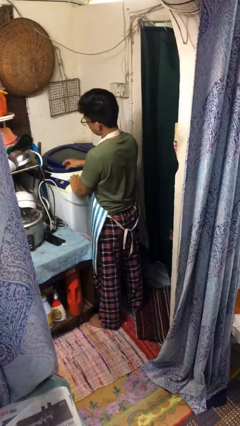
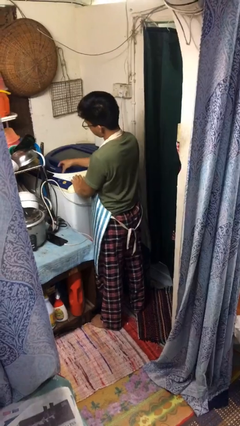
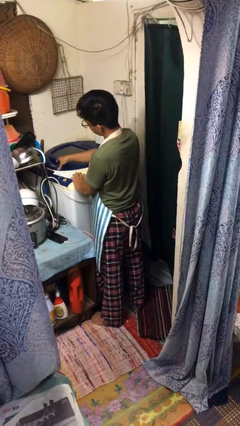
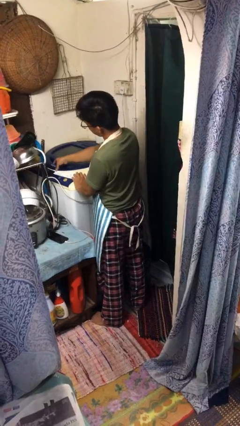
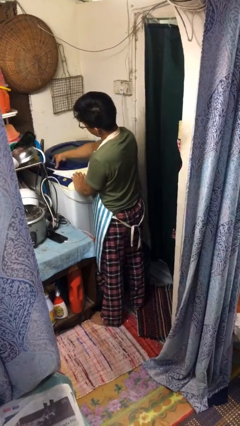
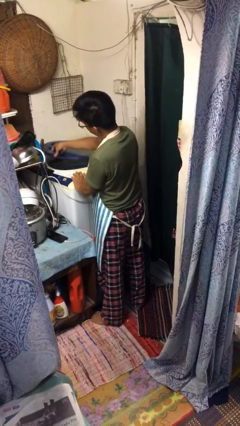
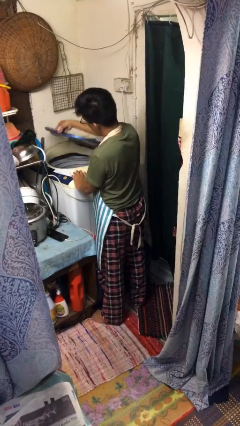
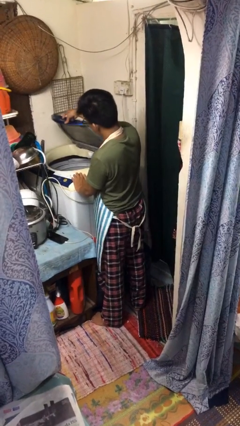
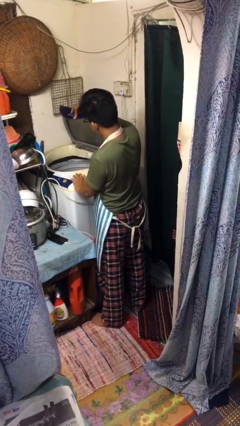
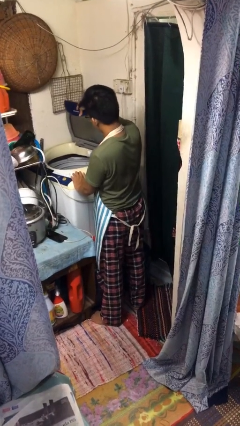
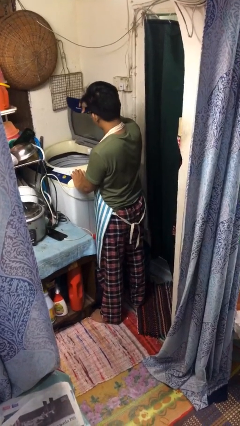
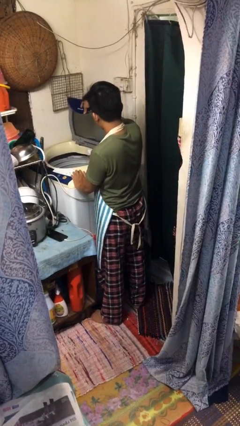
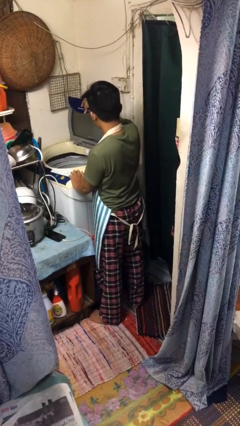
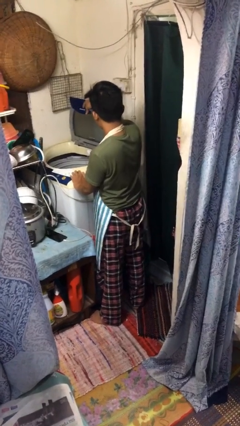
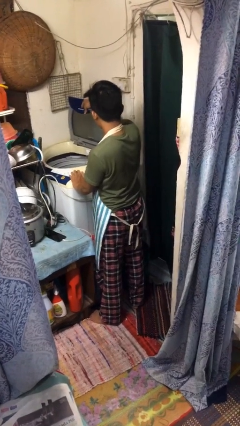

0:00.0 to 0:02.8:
person opens clothes washer

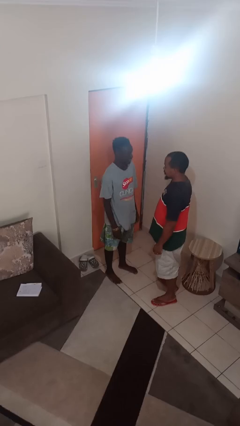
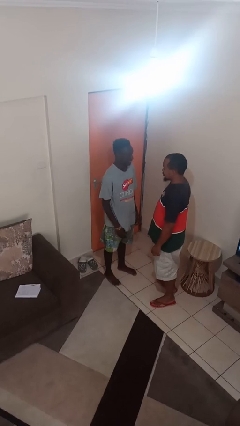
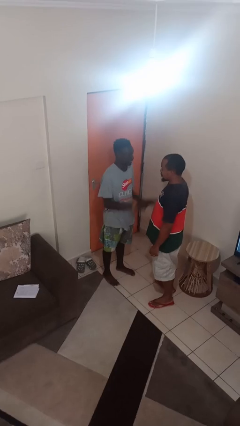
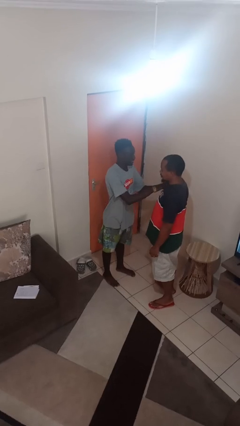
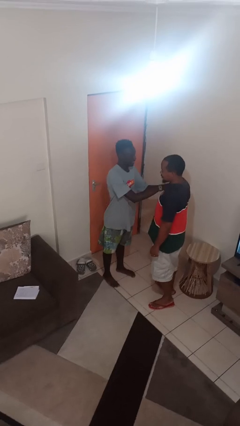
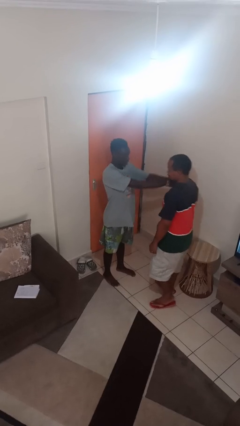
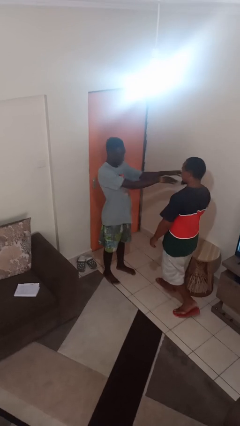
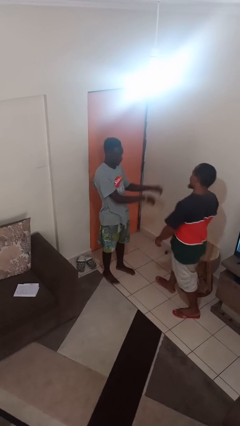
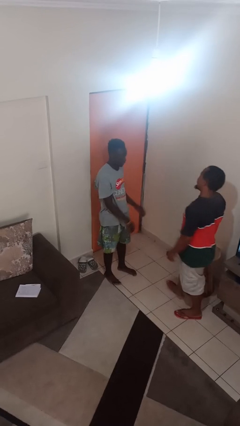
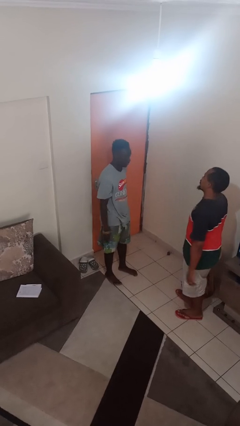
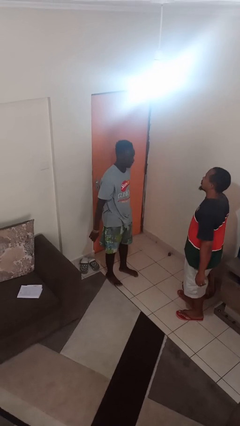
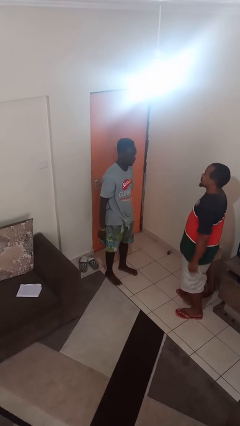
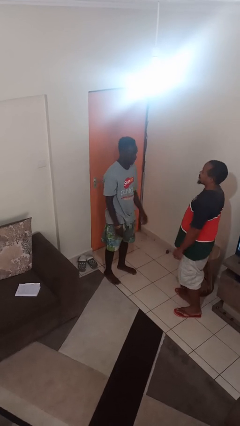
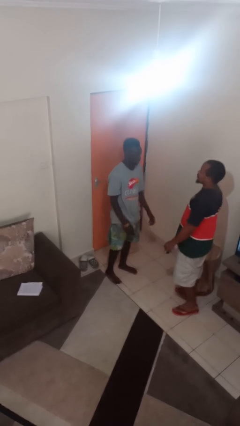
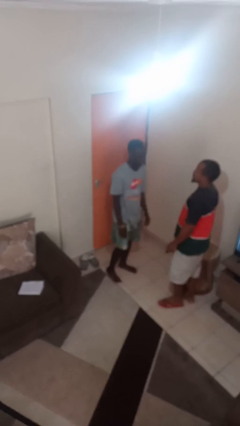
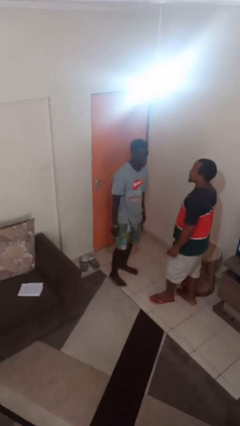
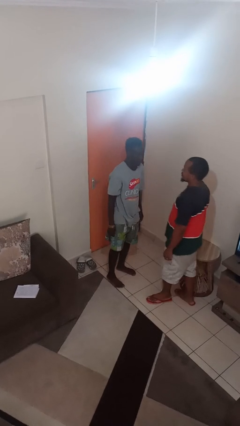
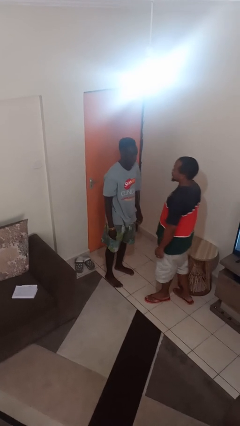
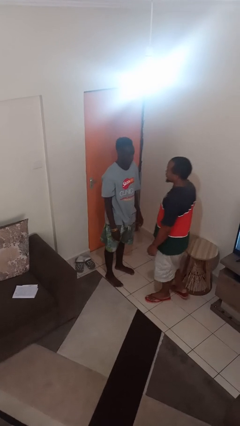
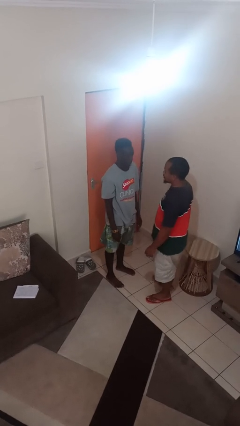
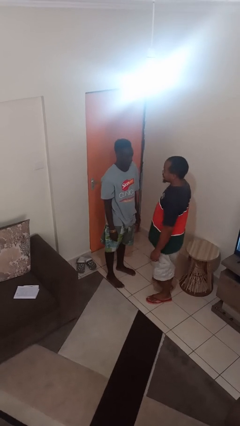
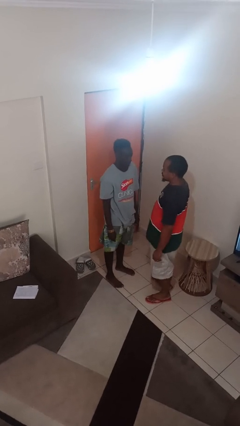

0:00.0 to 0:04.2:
person shoves person

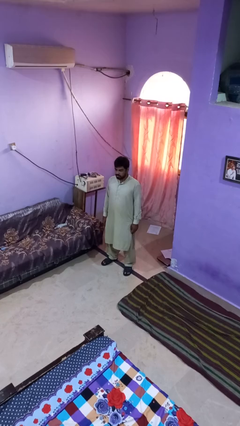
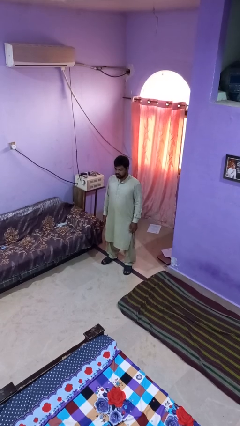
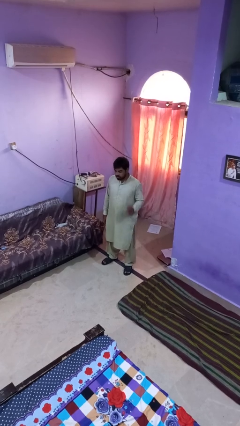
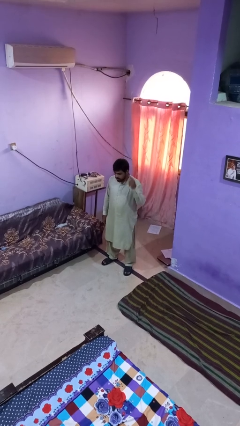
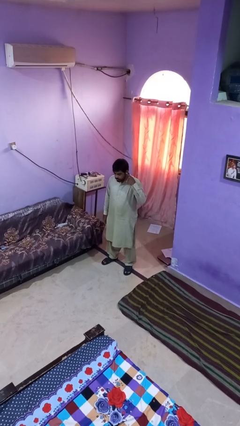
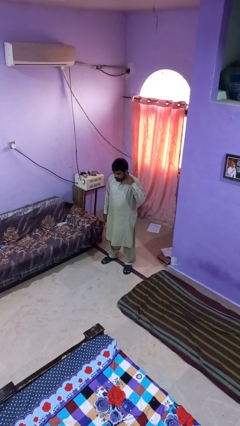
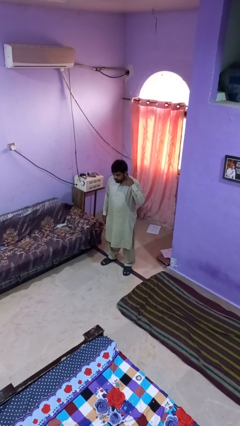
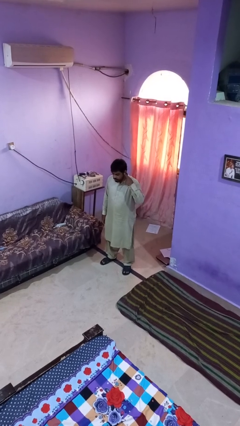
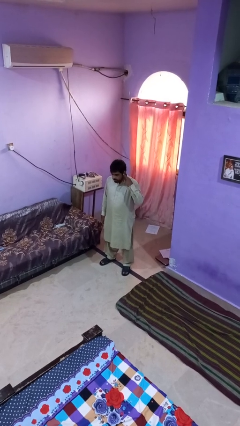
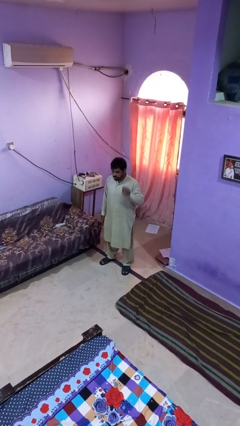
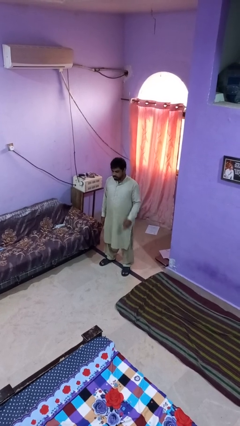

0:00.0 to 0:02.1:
person gestures listen closely

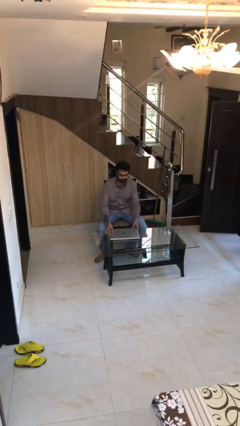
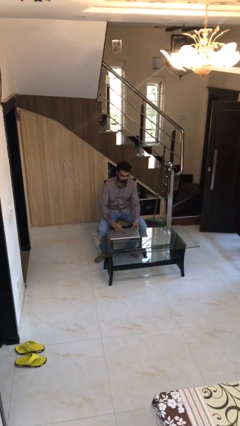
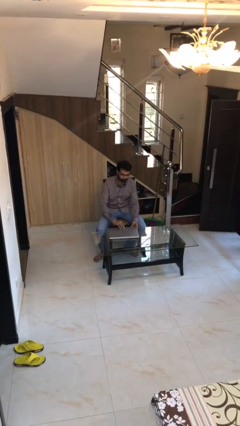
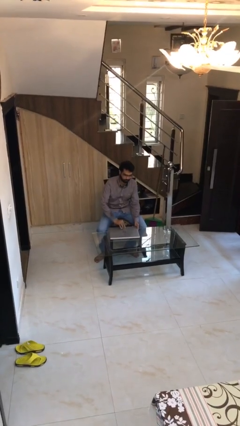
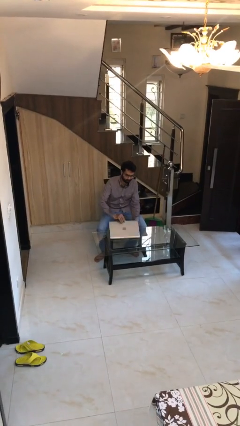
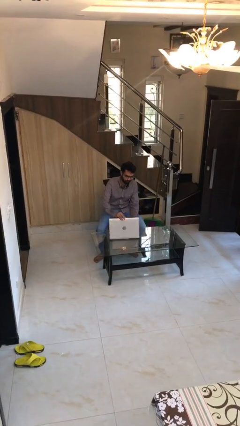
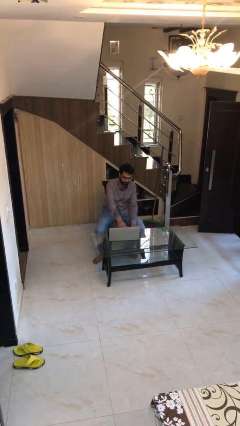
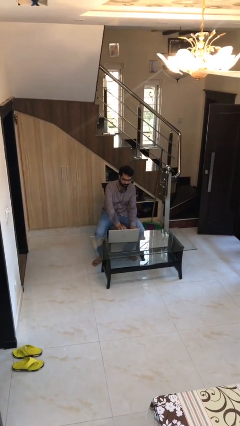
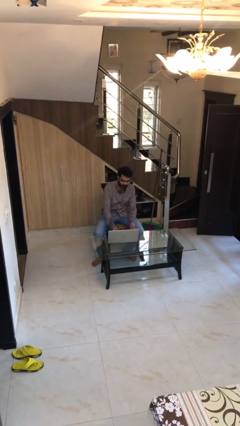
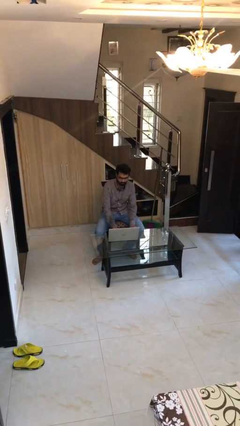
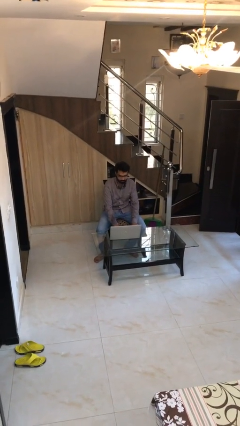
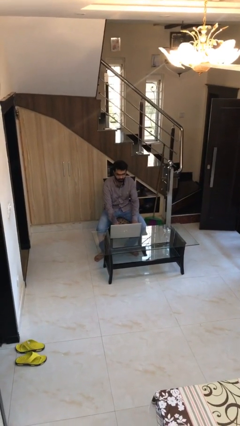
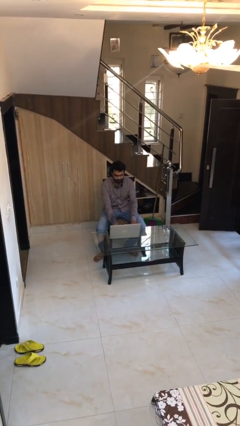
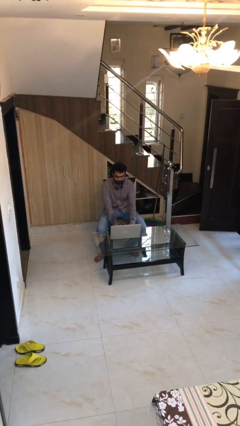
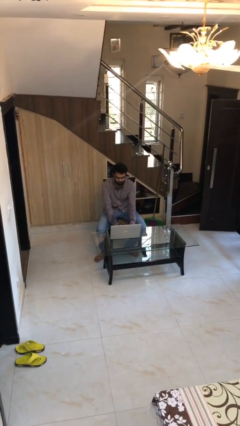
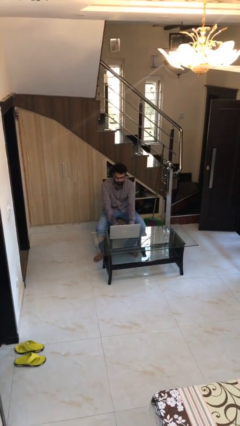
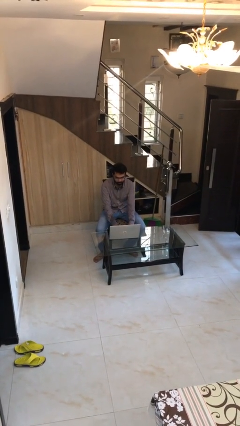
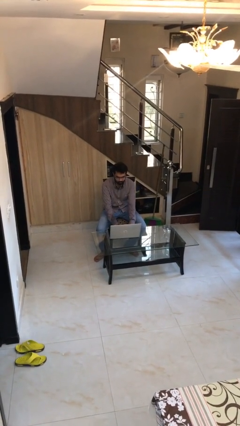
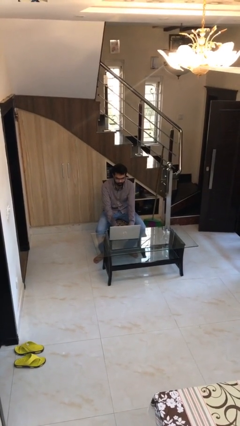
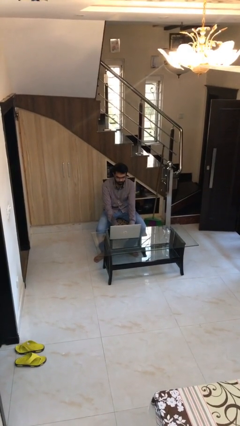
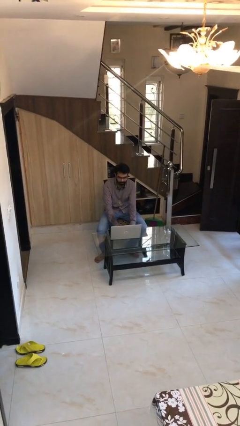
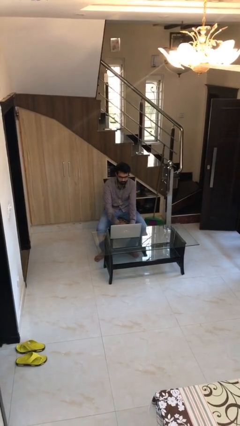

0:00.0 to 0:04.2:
person interacts with laptop

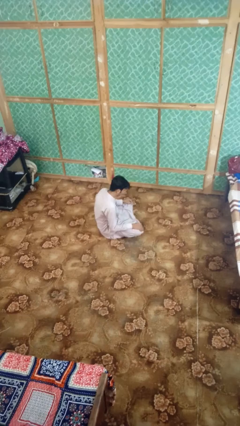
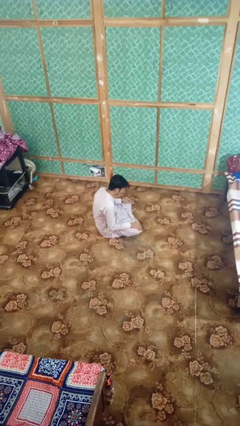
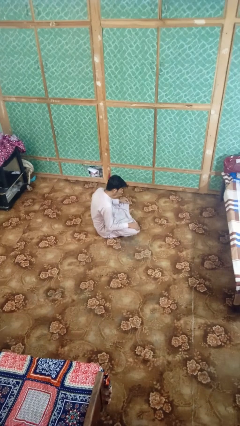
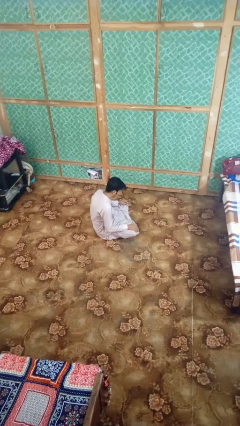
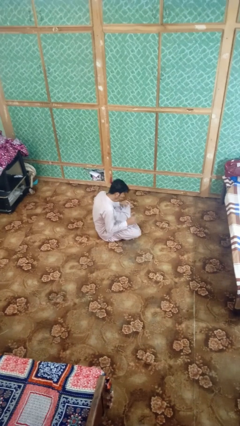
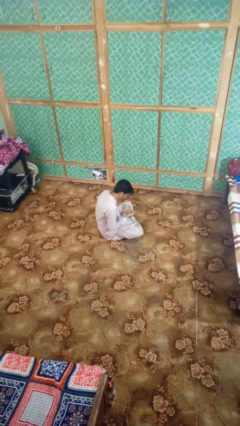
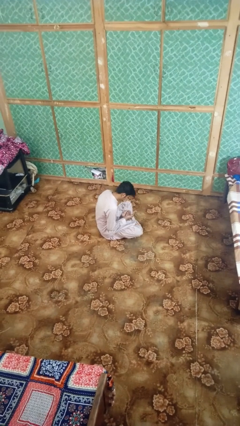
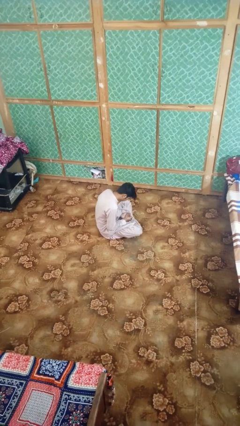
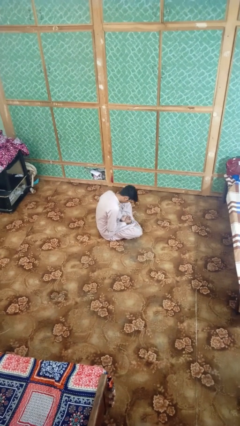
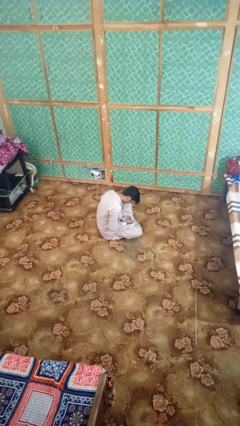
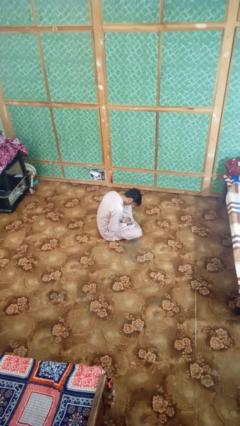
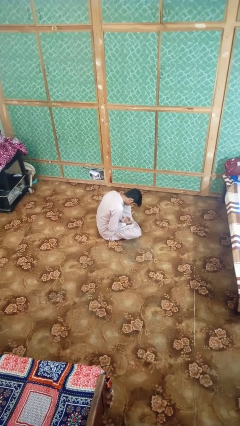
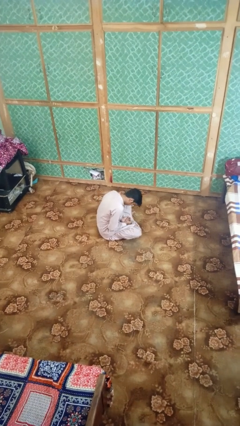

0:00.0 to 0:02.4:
person looks at hands in lap

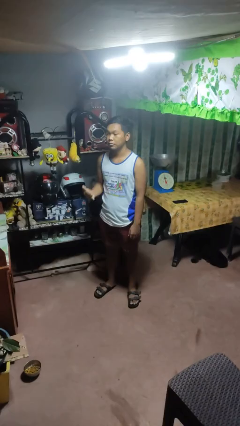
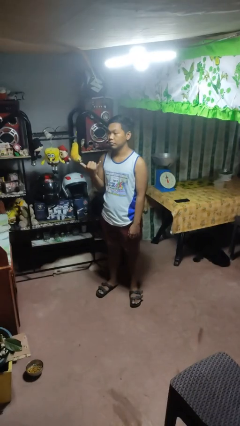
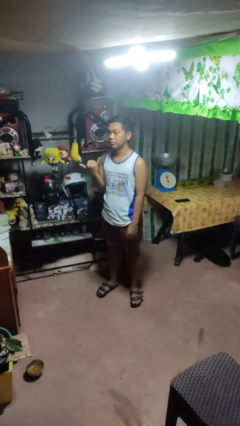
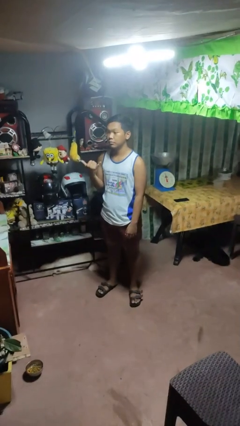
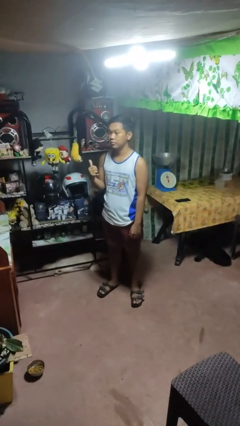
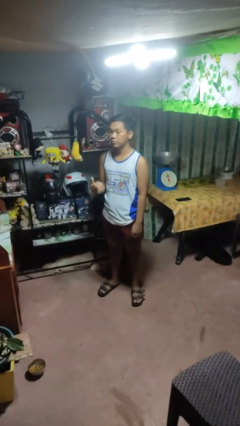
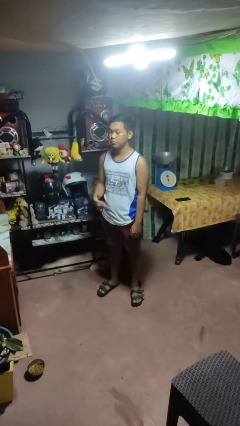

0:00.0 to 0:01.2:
person gestures hang loose

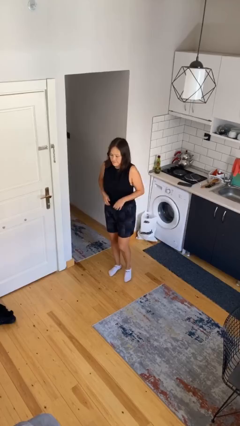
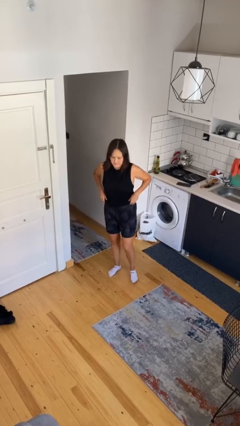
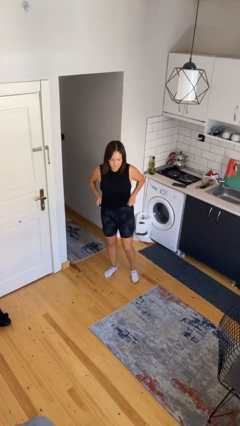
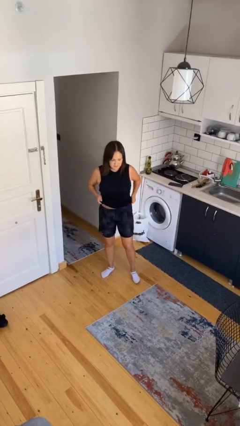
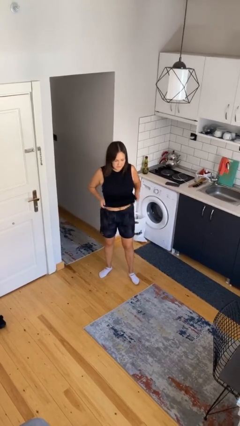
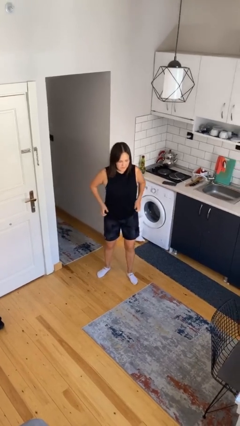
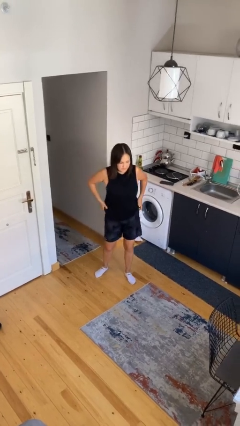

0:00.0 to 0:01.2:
person untucks shirt
